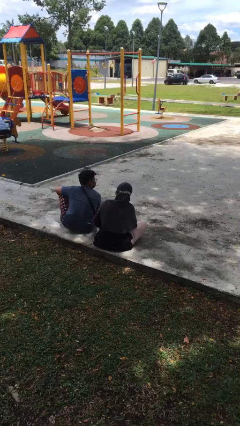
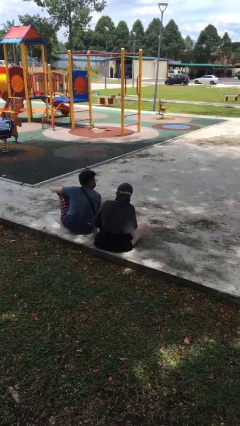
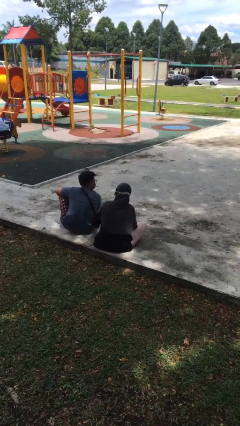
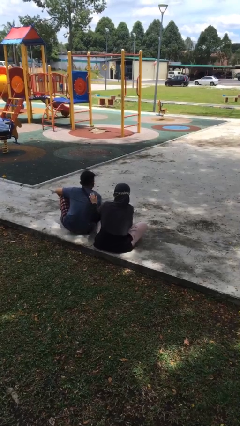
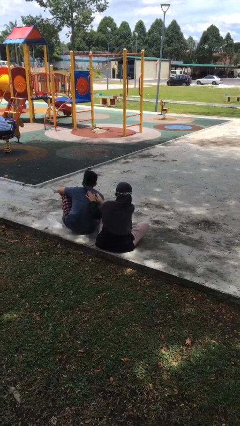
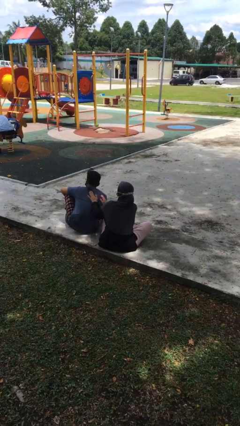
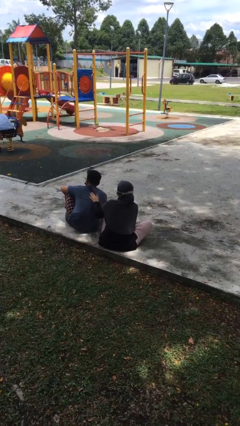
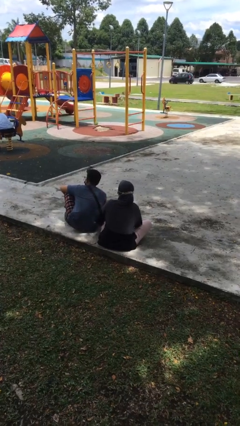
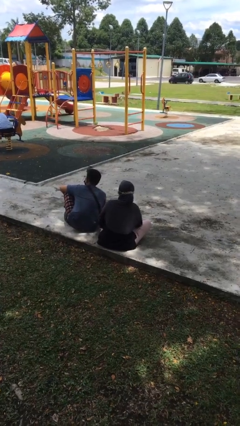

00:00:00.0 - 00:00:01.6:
person touches back of person

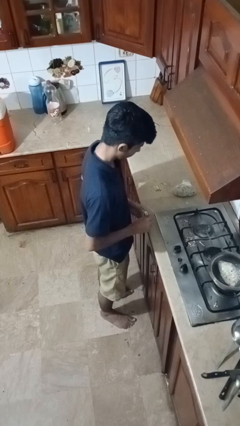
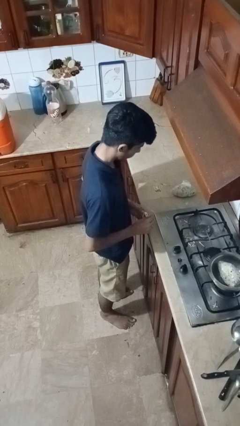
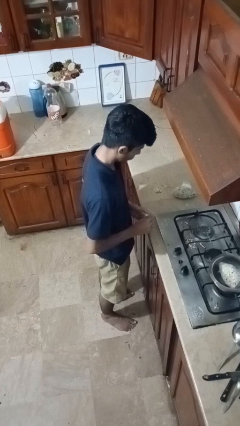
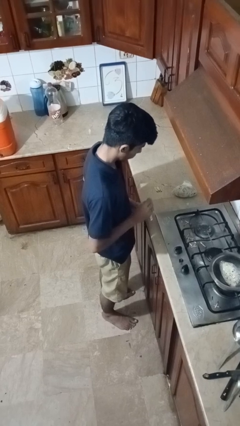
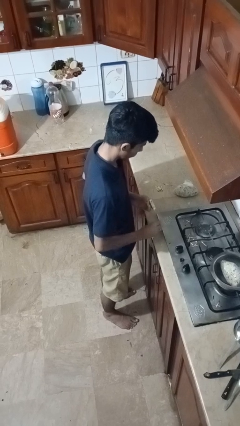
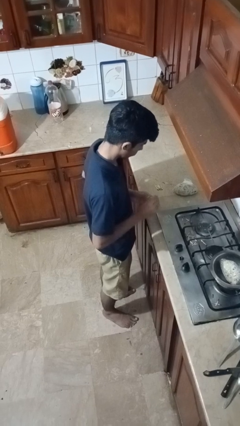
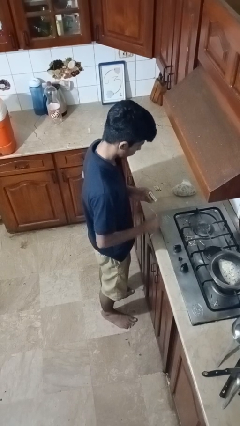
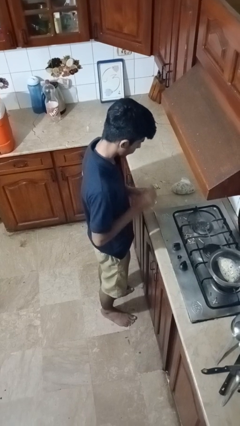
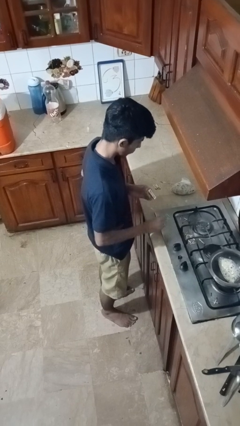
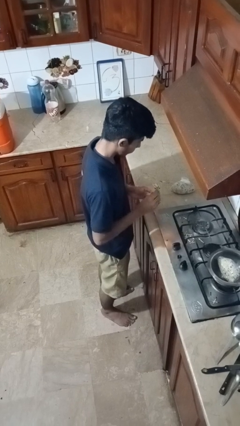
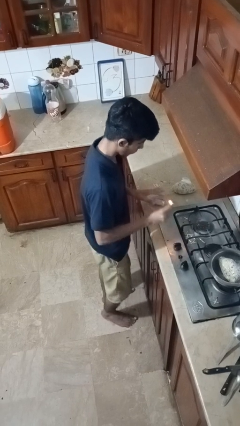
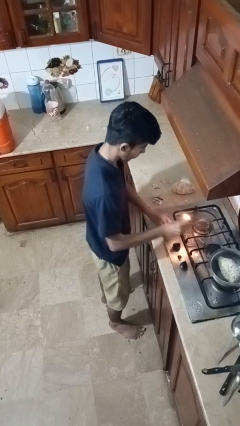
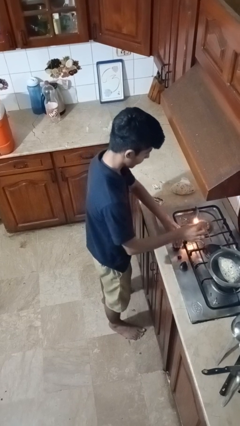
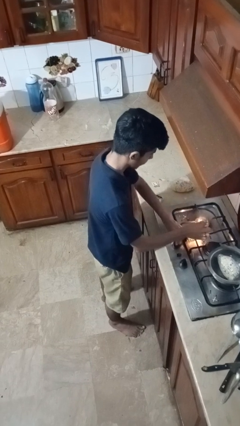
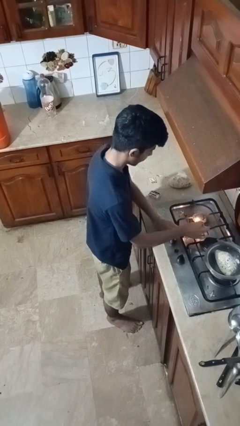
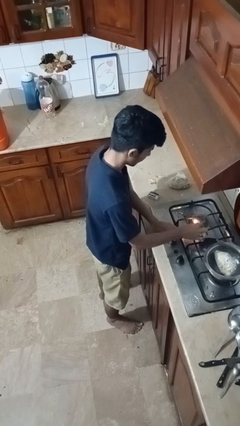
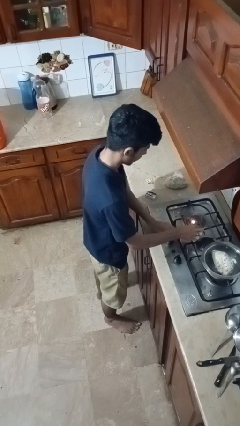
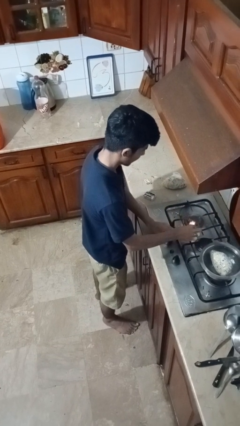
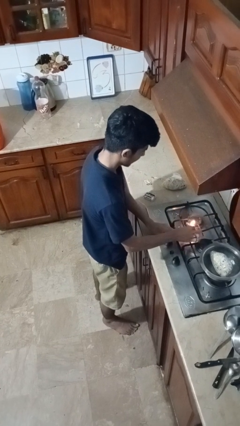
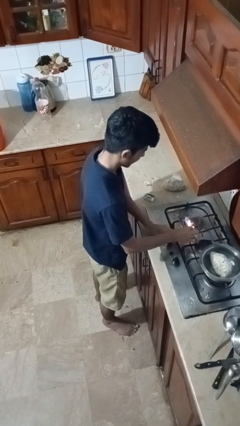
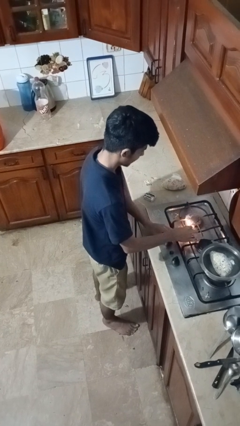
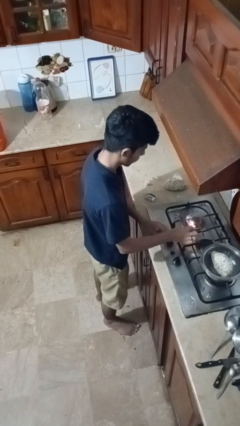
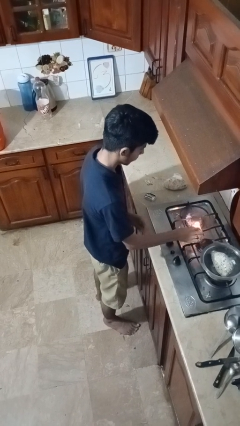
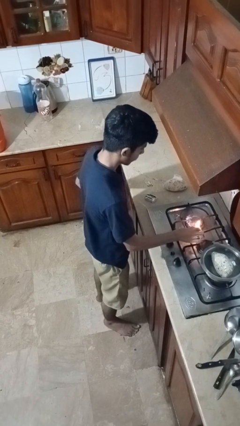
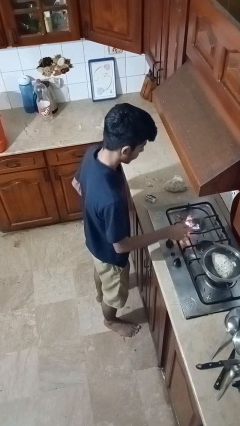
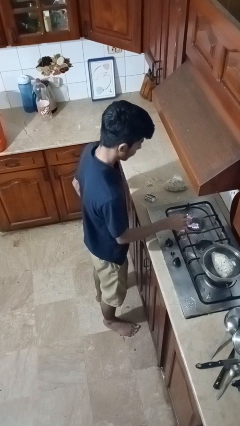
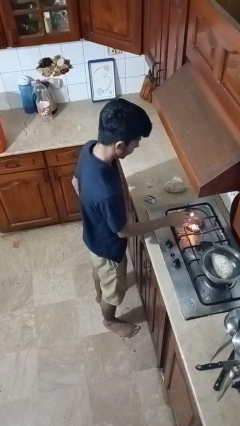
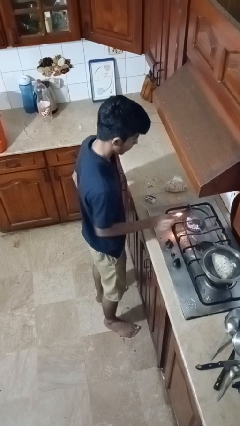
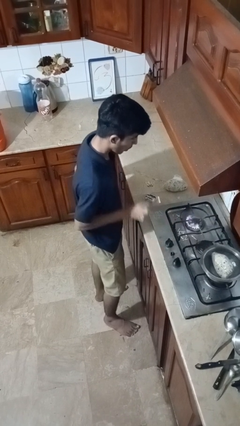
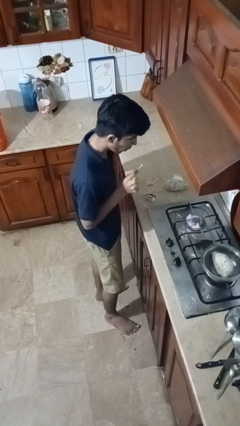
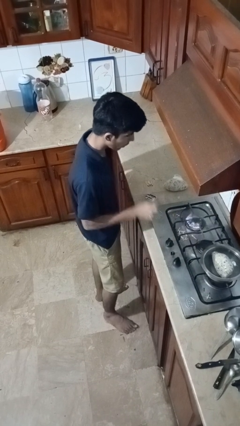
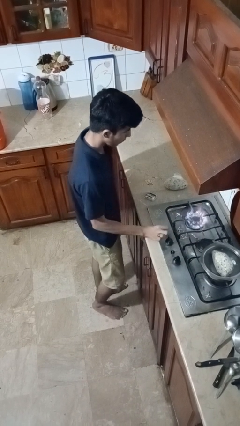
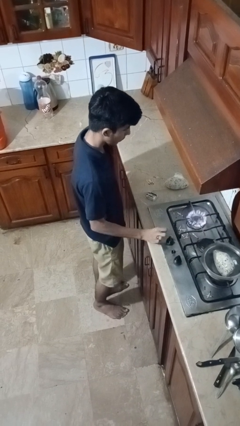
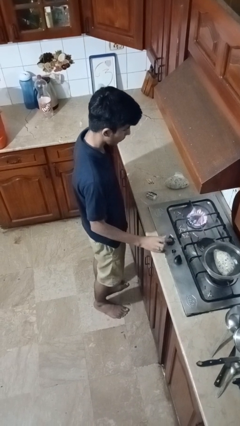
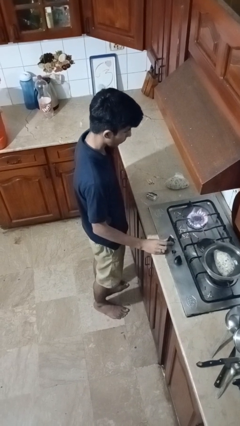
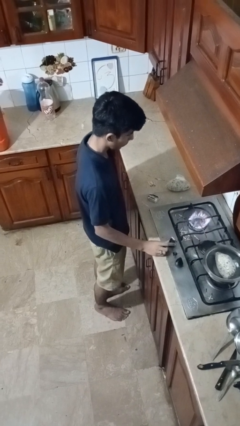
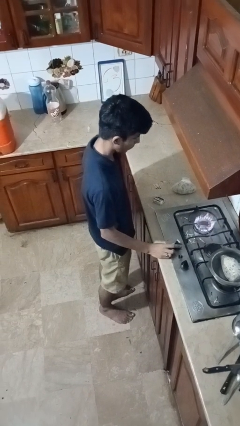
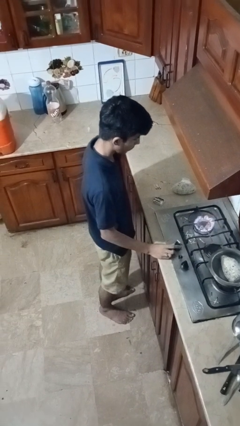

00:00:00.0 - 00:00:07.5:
person turns on stovetop

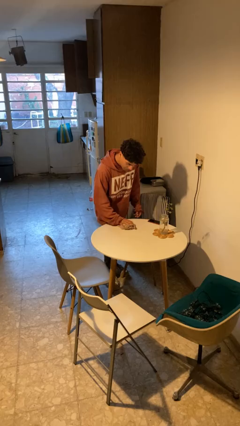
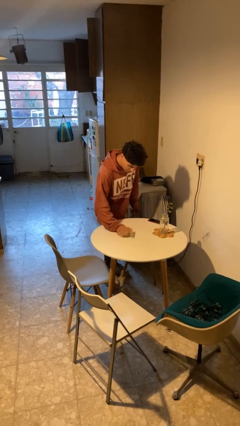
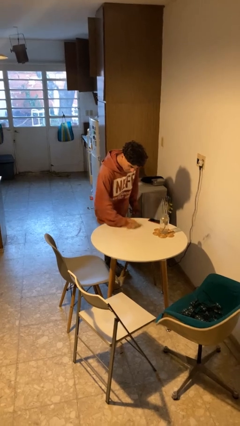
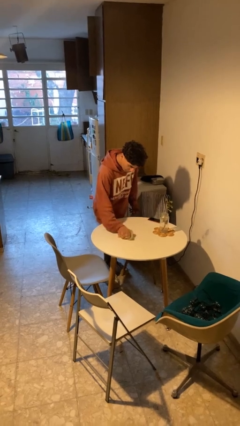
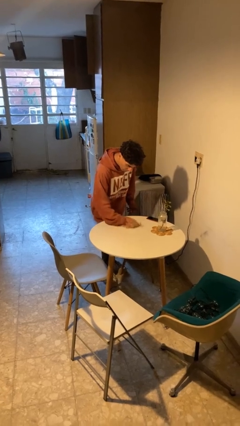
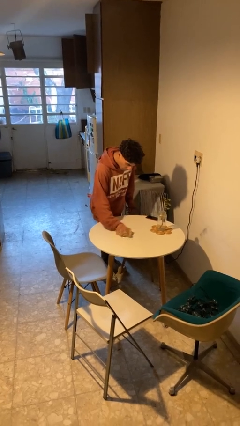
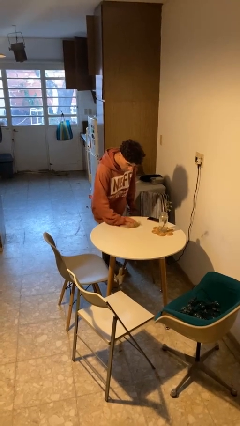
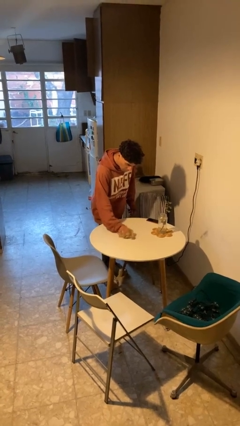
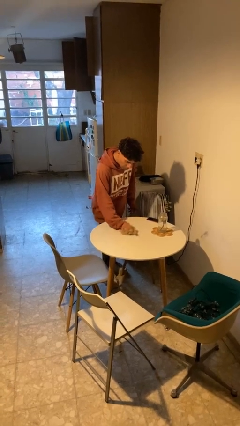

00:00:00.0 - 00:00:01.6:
person cleans table with rag

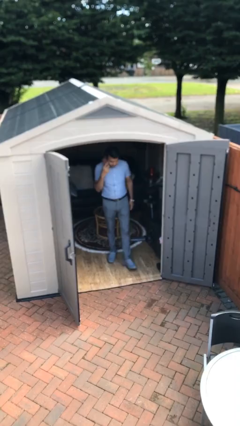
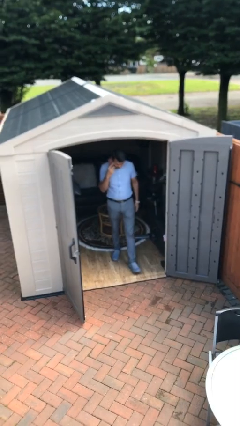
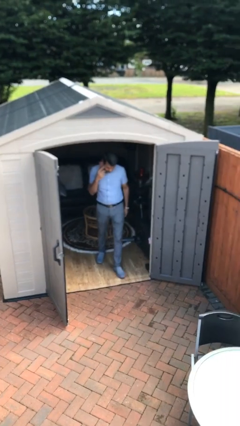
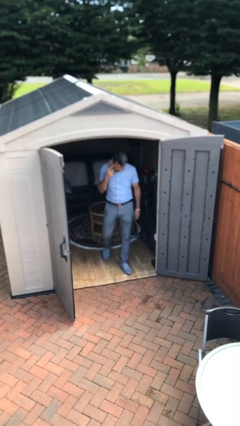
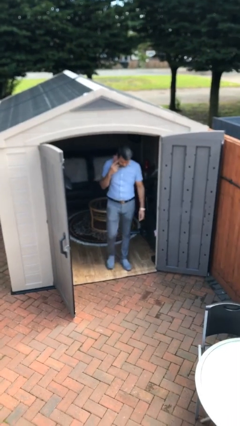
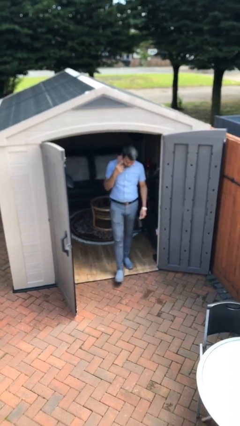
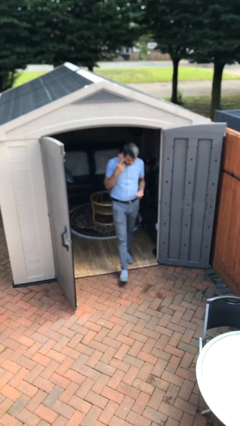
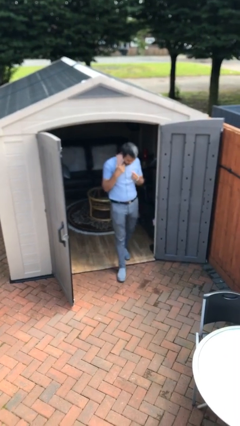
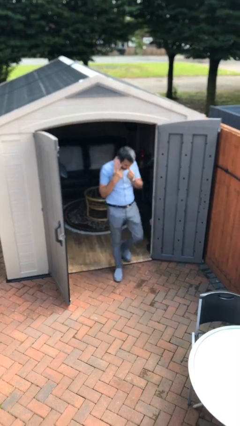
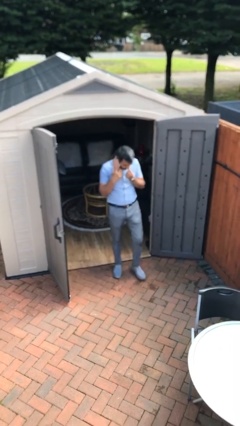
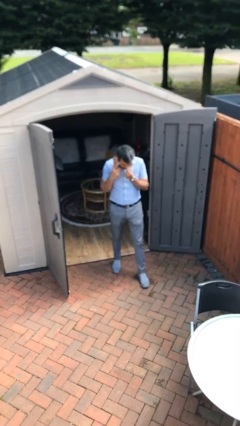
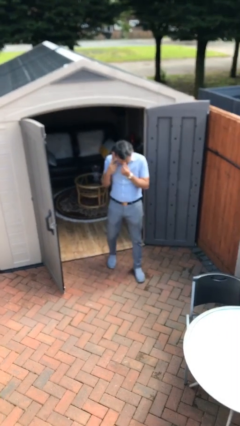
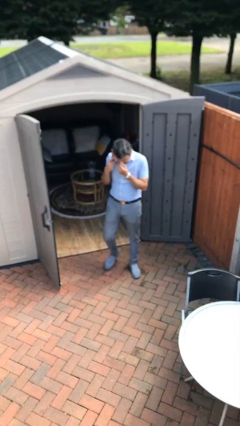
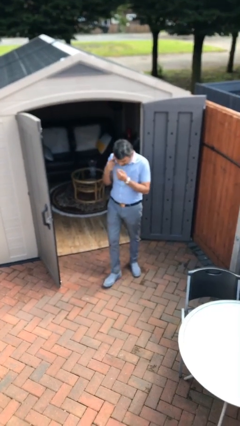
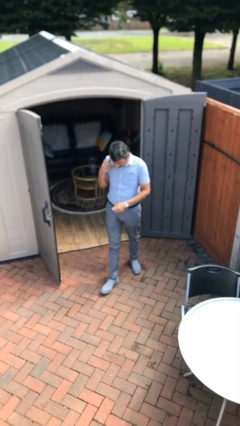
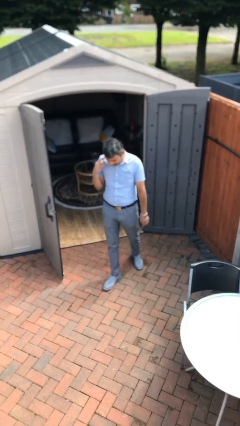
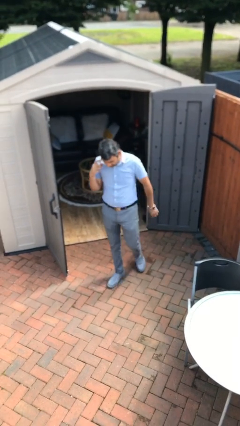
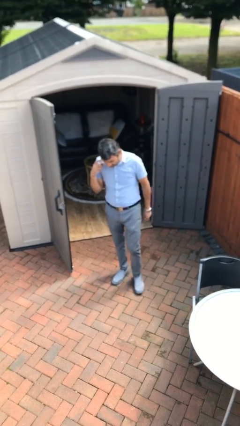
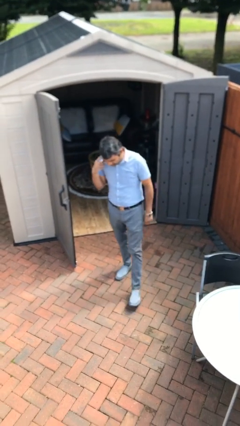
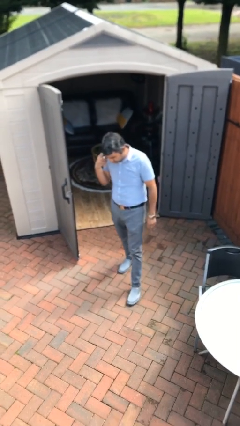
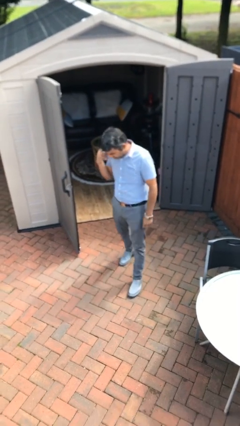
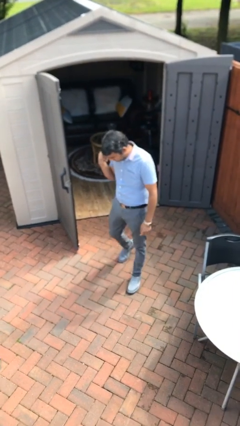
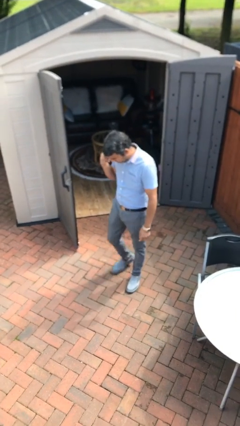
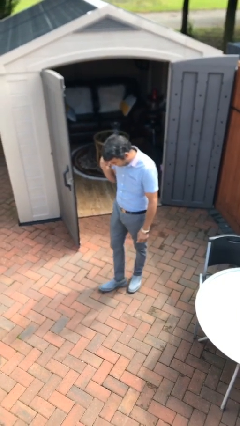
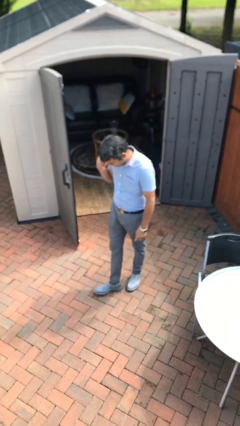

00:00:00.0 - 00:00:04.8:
person enters scene through structure

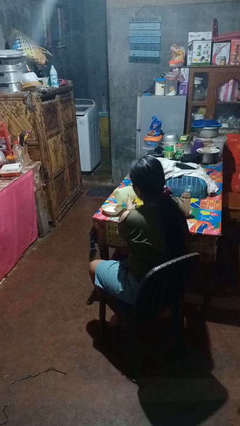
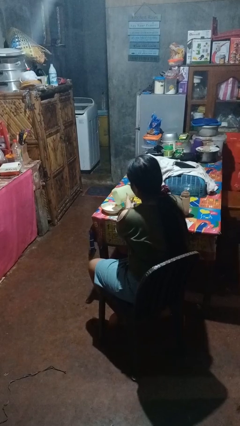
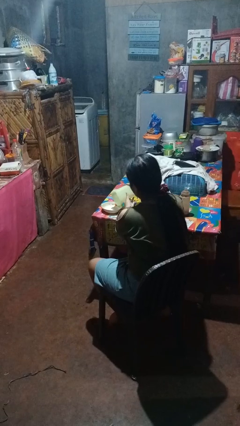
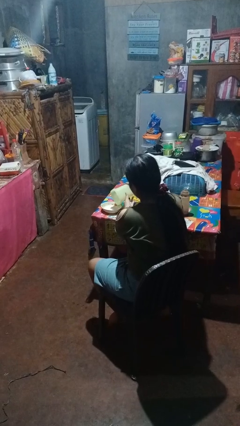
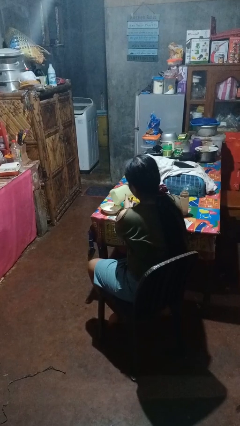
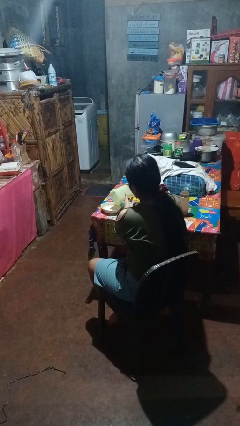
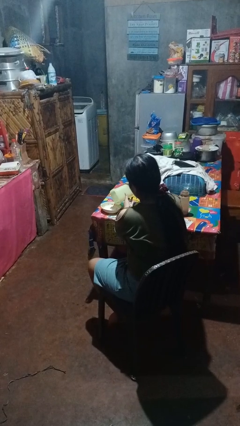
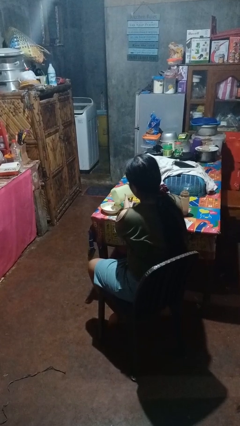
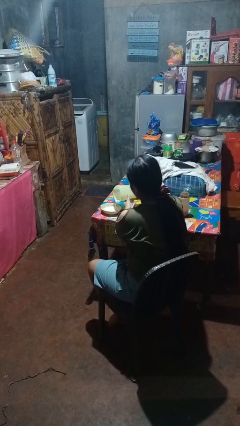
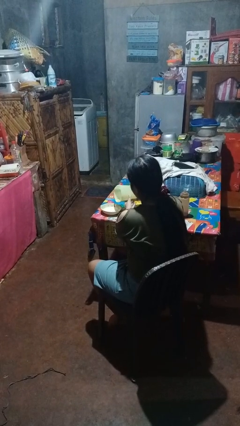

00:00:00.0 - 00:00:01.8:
person pours into bowl

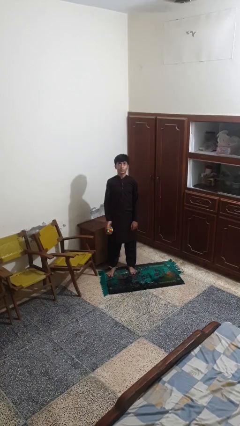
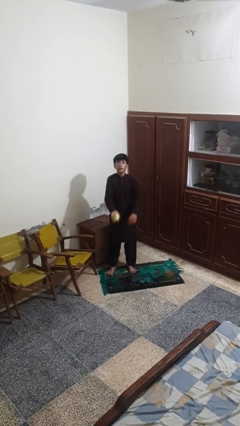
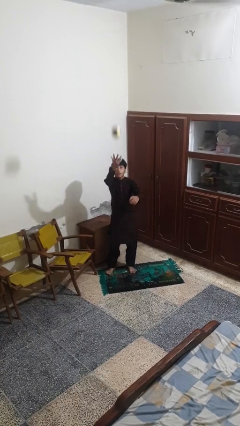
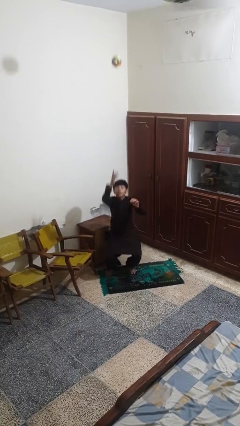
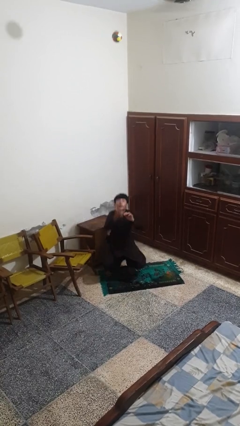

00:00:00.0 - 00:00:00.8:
person drops object
